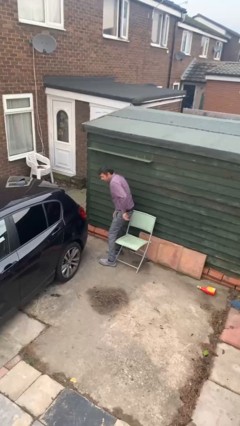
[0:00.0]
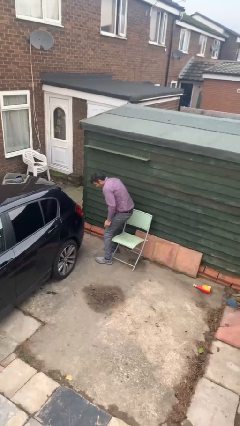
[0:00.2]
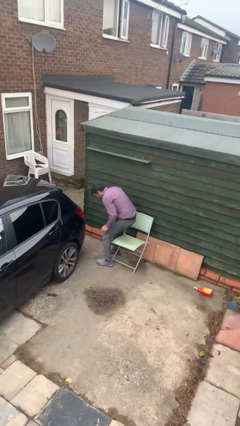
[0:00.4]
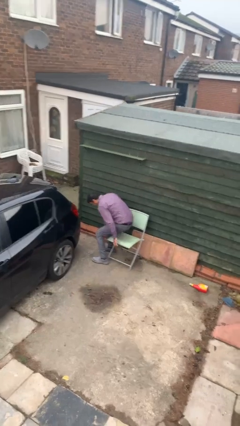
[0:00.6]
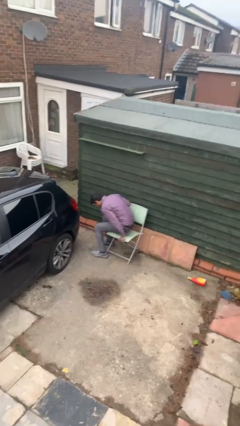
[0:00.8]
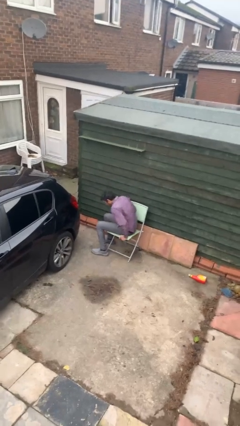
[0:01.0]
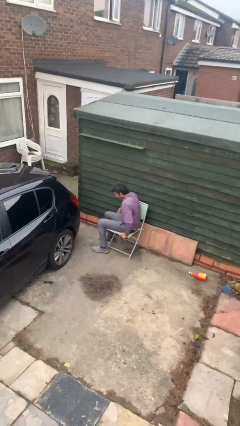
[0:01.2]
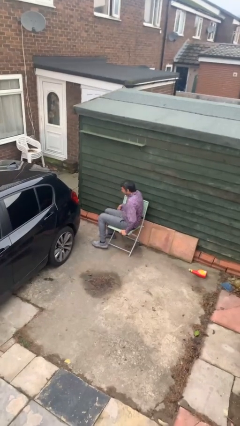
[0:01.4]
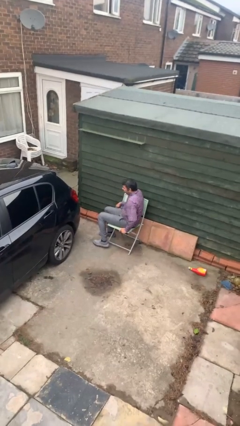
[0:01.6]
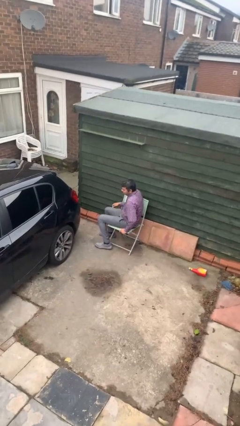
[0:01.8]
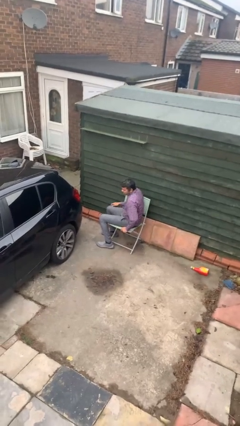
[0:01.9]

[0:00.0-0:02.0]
person sits down

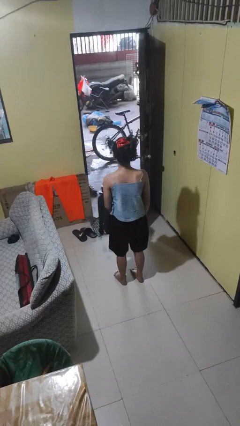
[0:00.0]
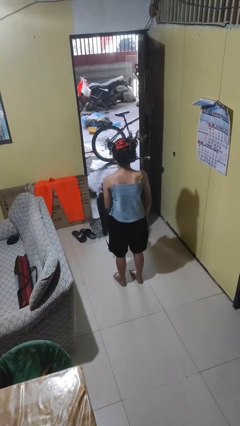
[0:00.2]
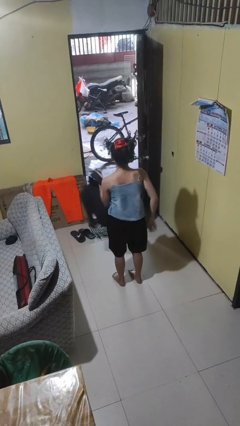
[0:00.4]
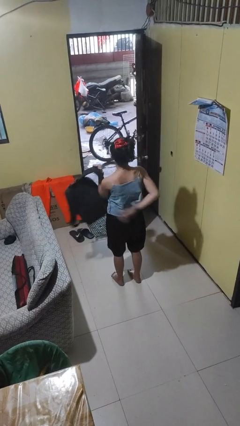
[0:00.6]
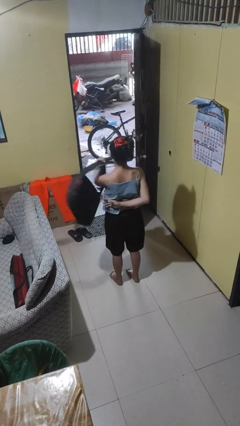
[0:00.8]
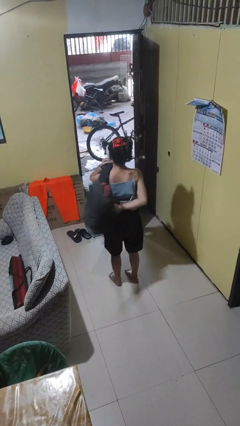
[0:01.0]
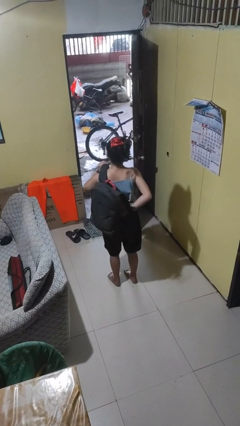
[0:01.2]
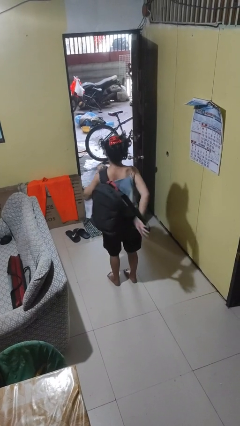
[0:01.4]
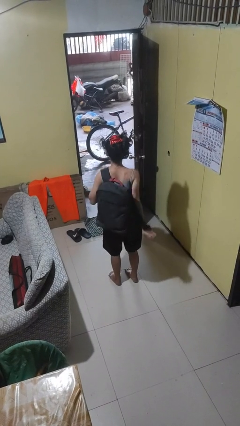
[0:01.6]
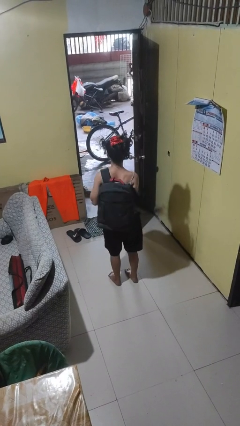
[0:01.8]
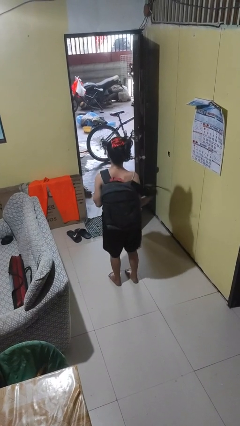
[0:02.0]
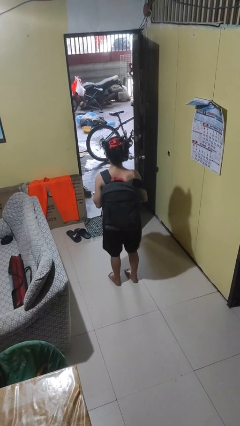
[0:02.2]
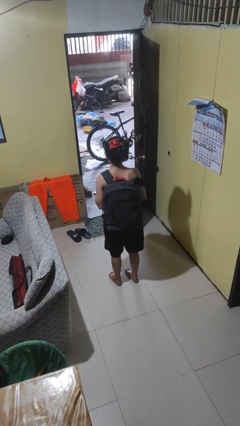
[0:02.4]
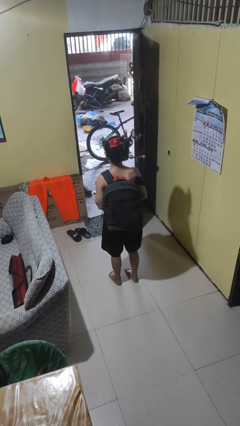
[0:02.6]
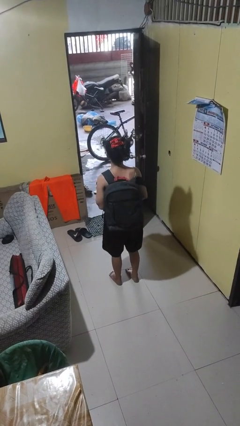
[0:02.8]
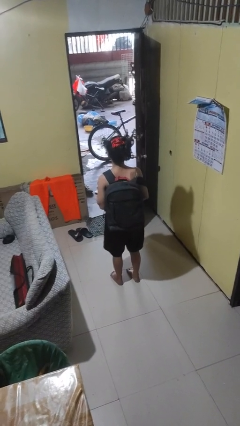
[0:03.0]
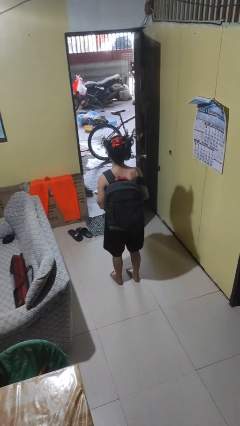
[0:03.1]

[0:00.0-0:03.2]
person puts on backpack

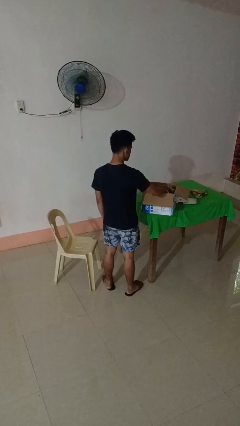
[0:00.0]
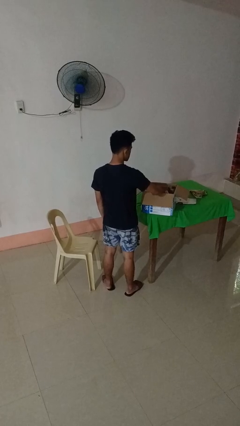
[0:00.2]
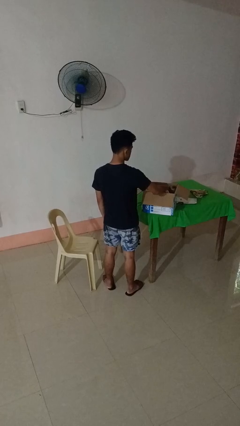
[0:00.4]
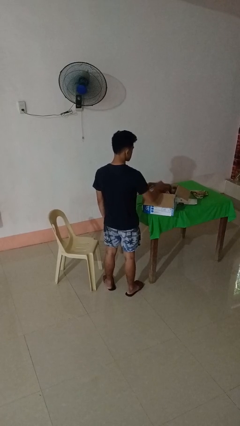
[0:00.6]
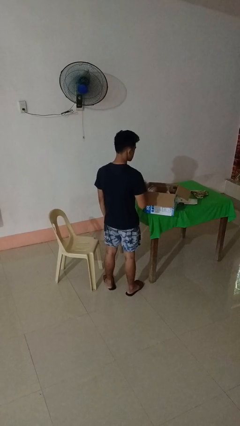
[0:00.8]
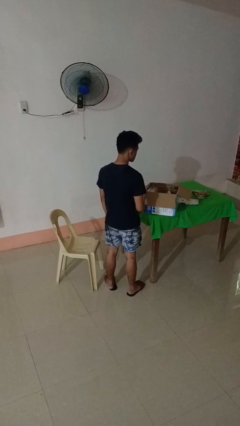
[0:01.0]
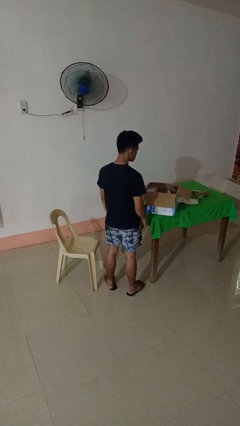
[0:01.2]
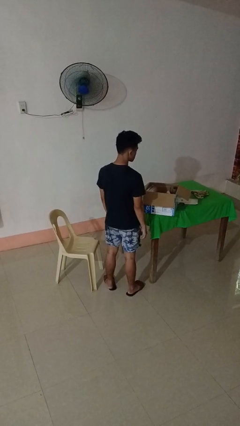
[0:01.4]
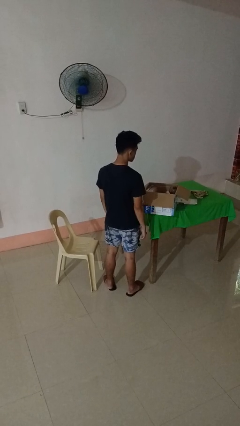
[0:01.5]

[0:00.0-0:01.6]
person puts object into box

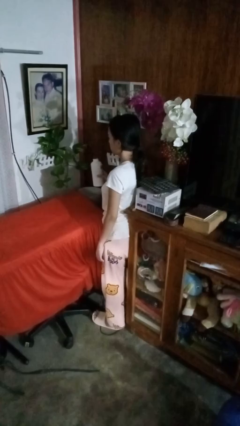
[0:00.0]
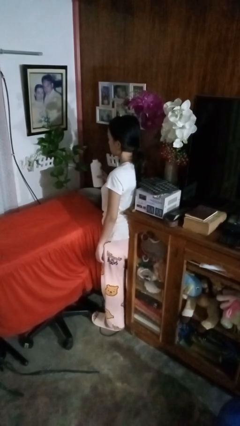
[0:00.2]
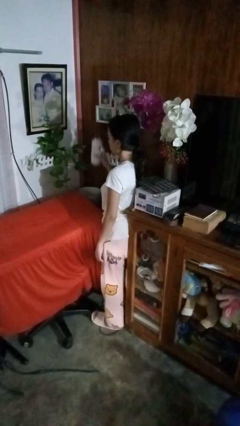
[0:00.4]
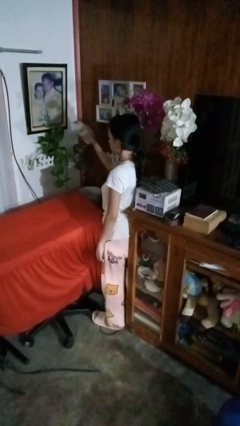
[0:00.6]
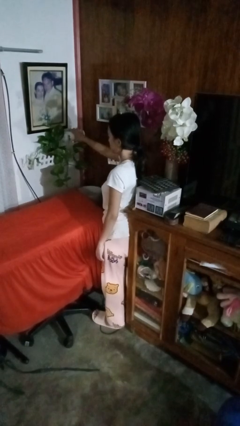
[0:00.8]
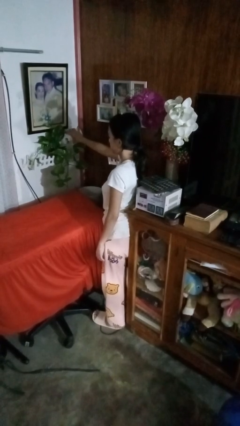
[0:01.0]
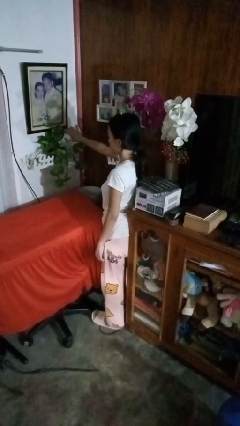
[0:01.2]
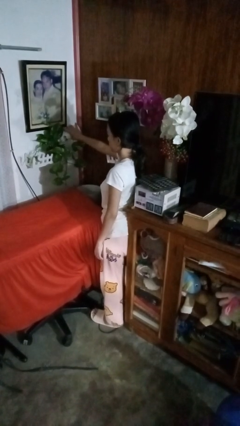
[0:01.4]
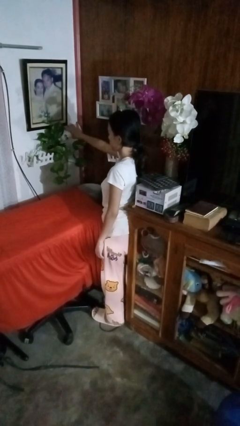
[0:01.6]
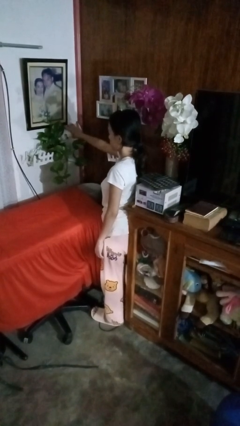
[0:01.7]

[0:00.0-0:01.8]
person waters houseplant

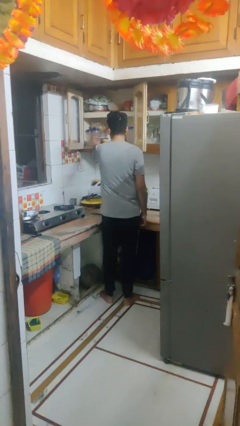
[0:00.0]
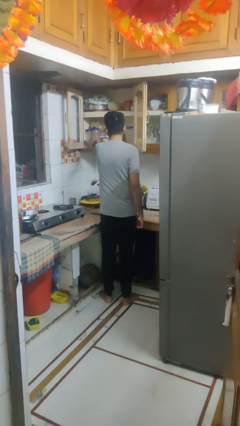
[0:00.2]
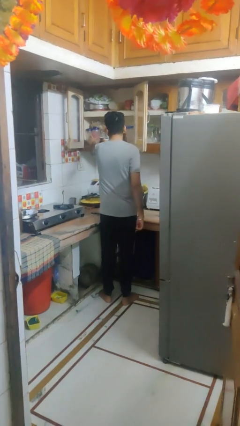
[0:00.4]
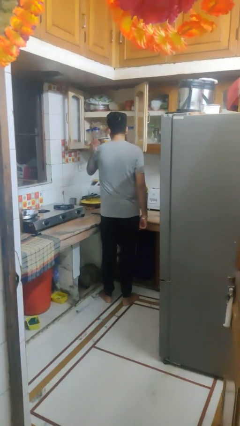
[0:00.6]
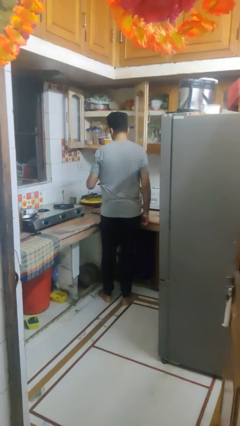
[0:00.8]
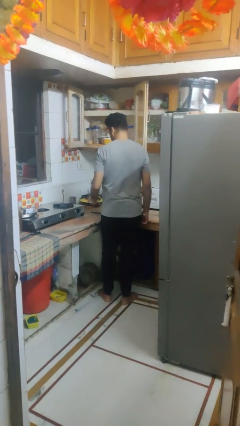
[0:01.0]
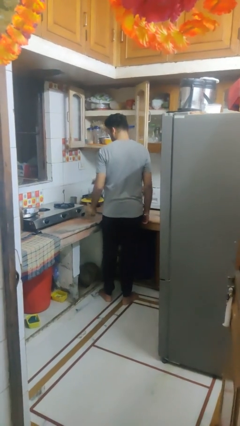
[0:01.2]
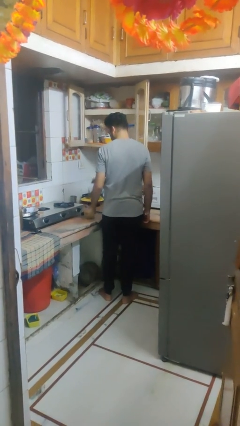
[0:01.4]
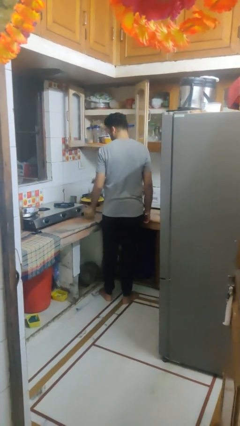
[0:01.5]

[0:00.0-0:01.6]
person takes object from cabinet

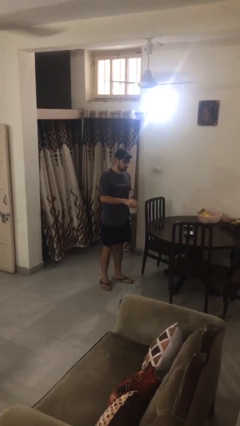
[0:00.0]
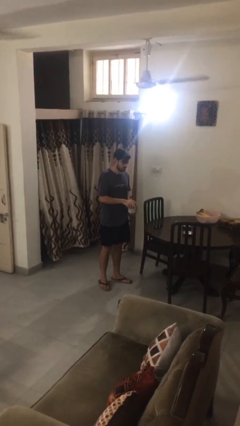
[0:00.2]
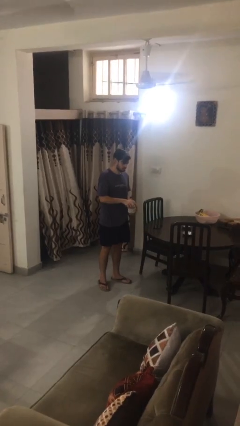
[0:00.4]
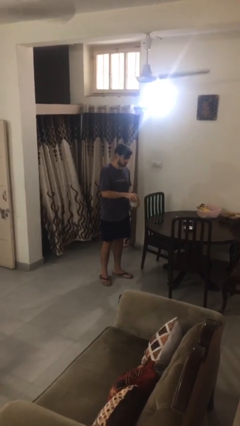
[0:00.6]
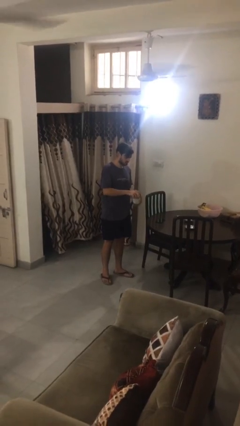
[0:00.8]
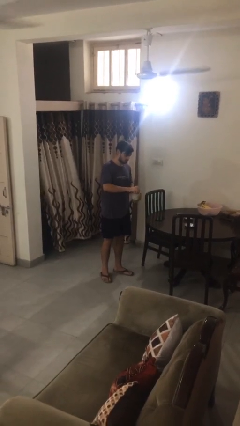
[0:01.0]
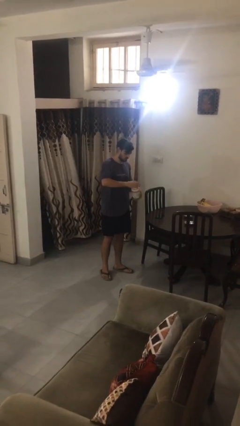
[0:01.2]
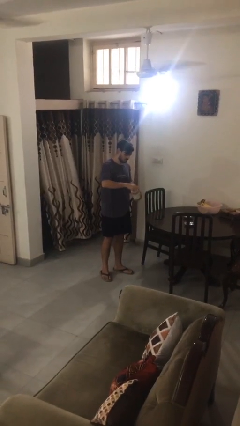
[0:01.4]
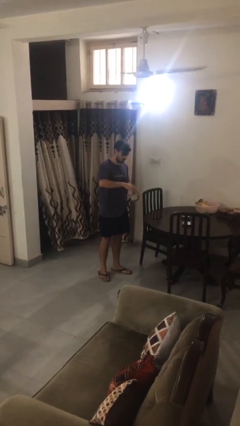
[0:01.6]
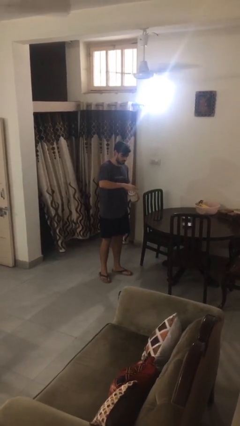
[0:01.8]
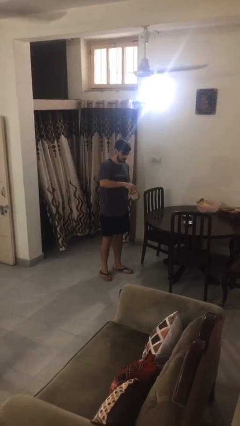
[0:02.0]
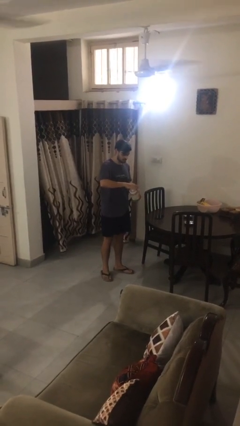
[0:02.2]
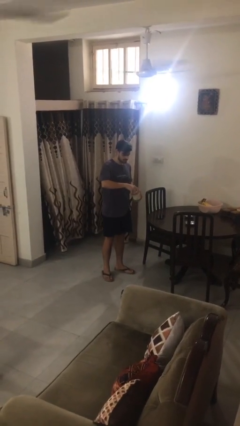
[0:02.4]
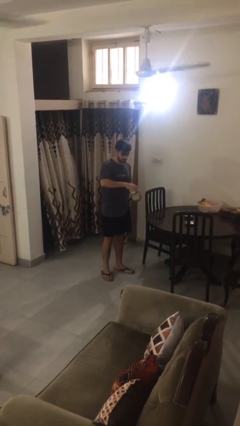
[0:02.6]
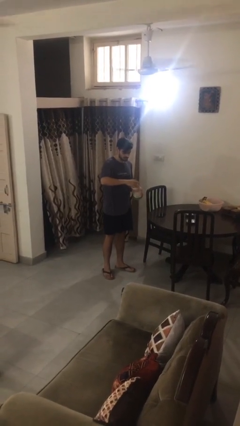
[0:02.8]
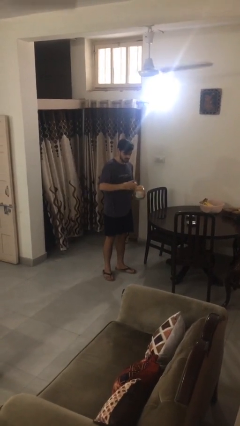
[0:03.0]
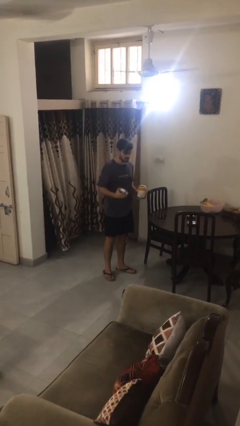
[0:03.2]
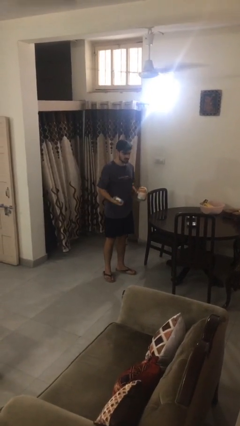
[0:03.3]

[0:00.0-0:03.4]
person opens jar

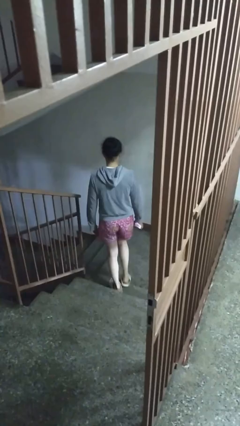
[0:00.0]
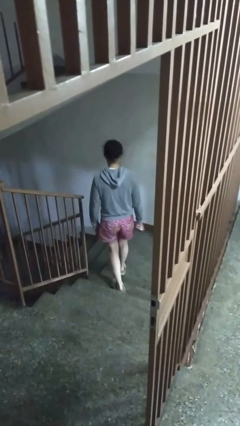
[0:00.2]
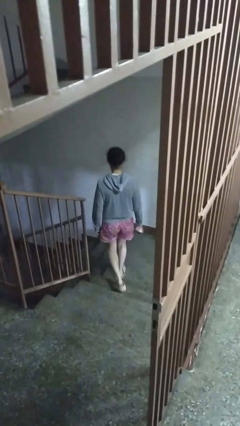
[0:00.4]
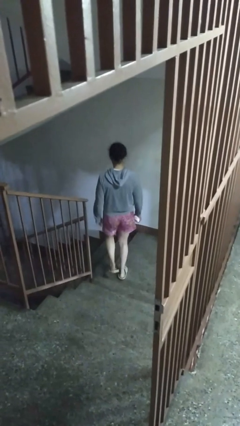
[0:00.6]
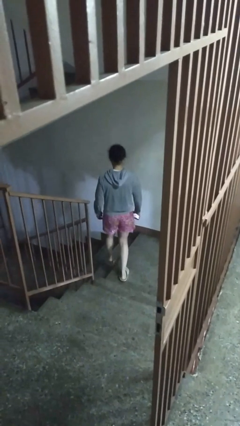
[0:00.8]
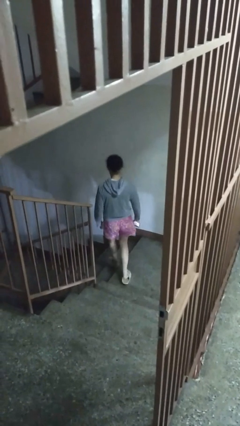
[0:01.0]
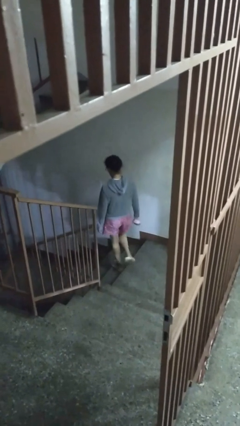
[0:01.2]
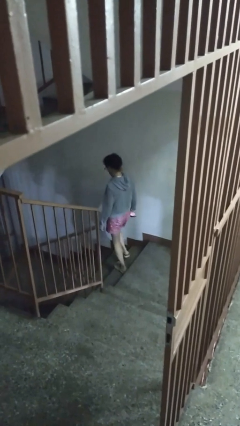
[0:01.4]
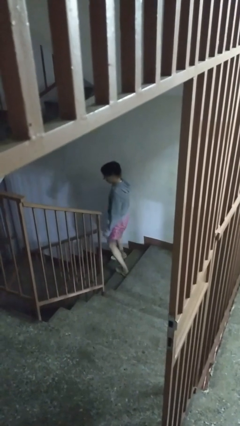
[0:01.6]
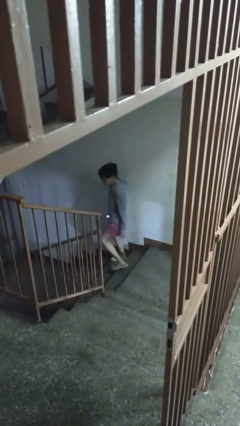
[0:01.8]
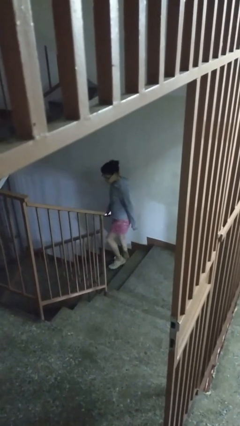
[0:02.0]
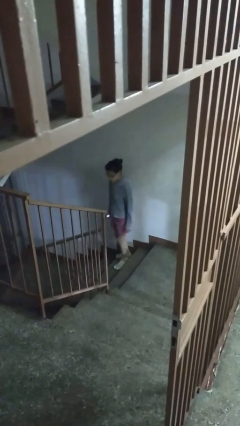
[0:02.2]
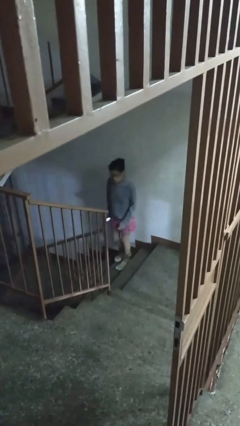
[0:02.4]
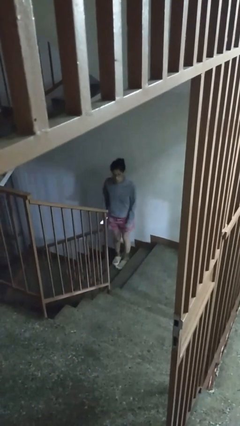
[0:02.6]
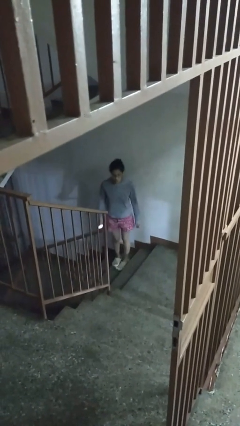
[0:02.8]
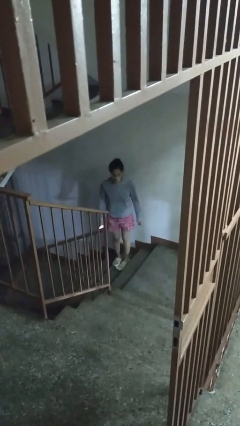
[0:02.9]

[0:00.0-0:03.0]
person climbs down stairs
